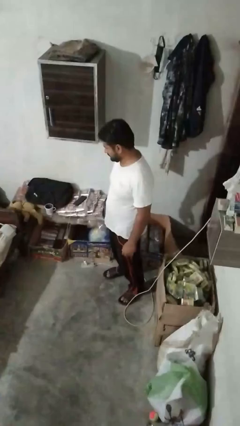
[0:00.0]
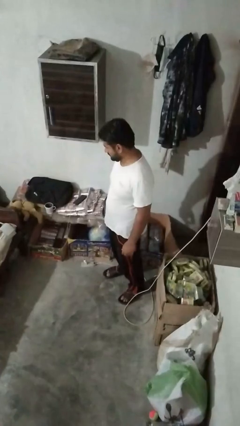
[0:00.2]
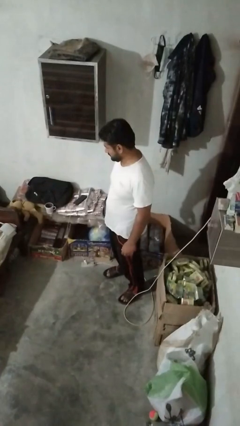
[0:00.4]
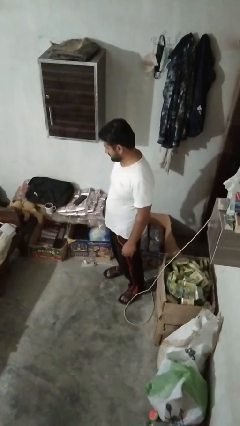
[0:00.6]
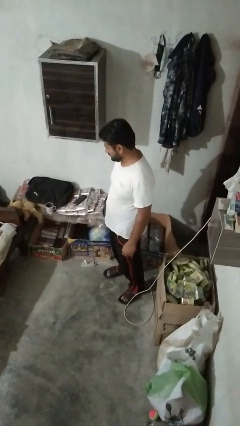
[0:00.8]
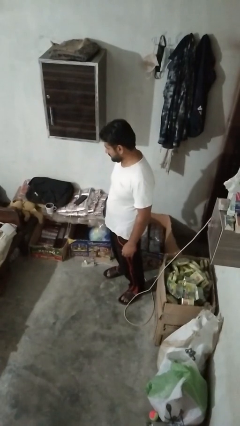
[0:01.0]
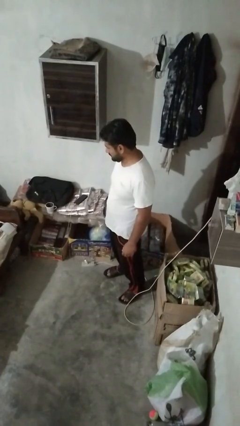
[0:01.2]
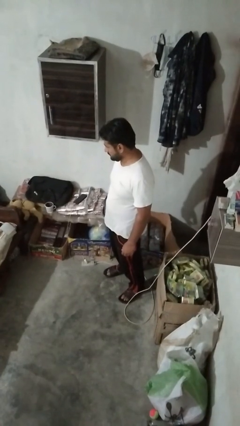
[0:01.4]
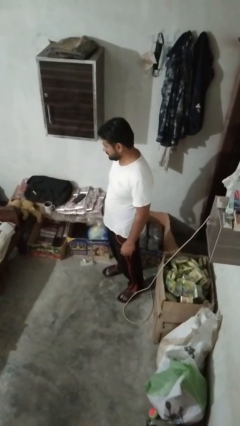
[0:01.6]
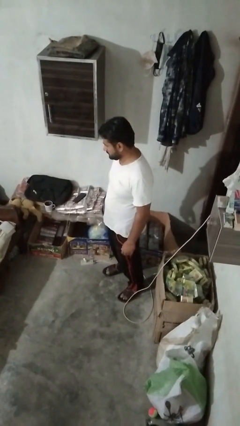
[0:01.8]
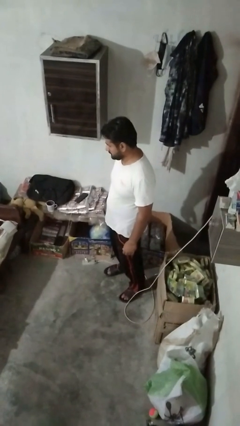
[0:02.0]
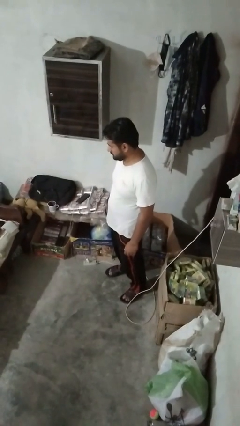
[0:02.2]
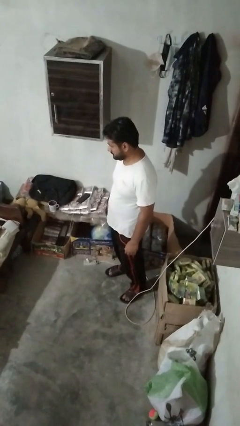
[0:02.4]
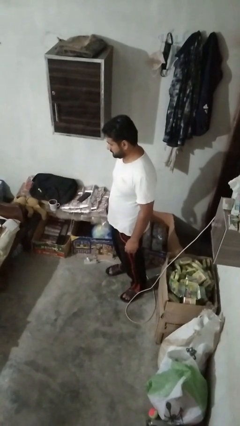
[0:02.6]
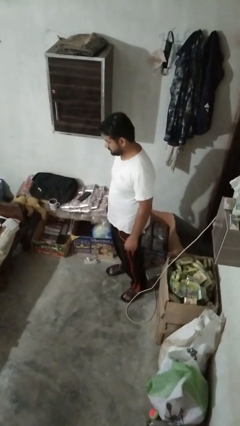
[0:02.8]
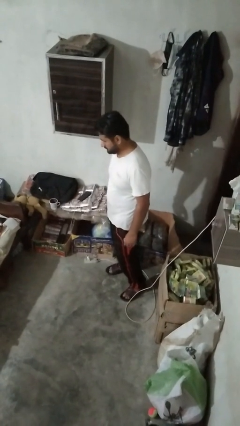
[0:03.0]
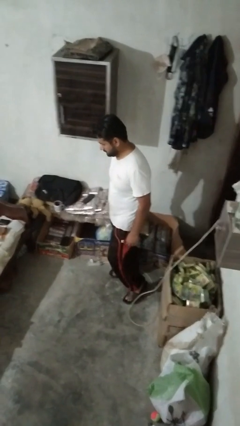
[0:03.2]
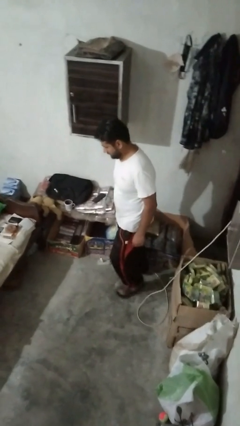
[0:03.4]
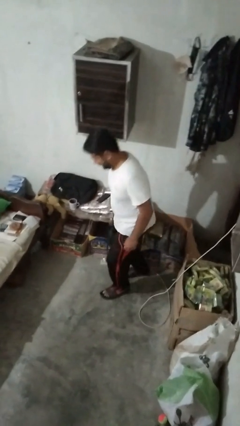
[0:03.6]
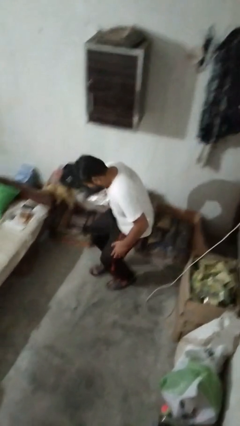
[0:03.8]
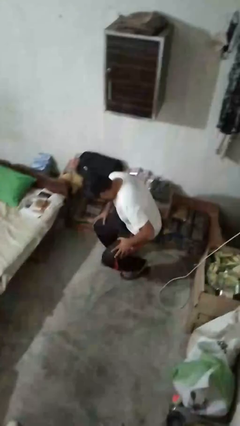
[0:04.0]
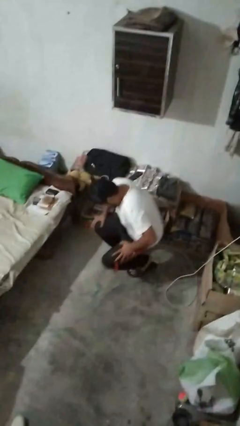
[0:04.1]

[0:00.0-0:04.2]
person trips on object on floor

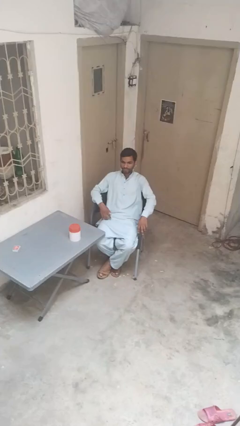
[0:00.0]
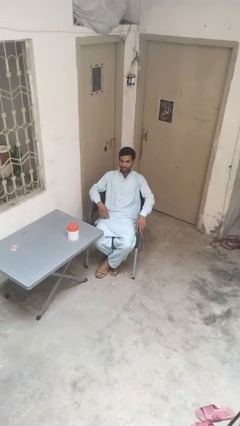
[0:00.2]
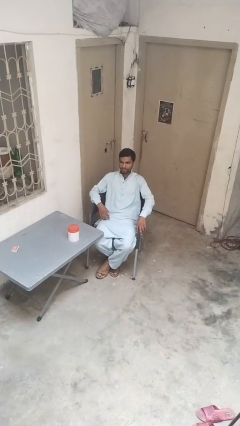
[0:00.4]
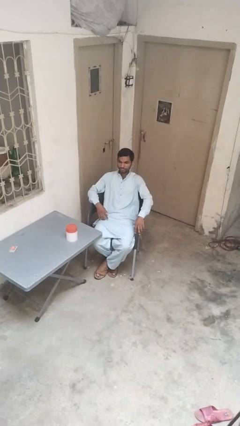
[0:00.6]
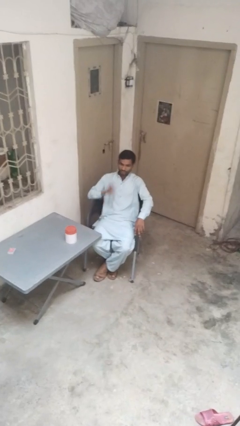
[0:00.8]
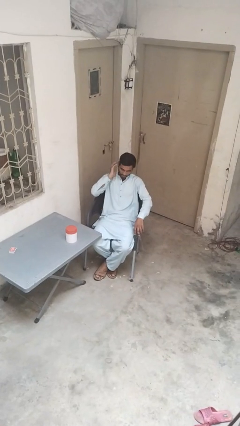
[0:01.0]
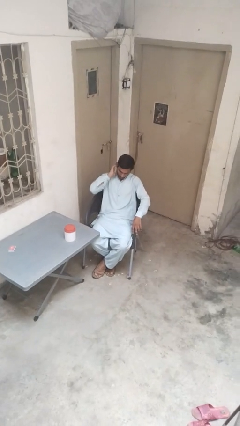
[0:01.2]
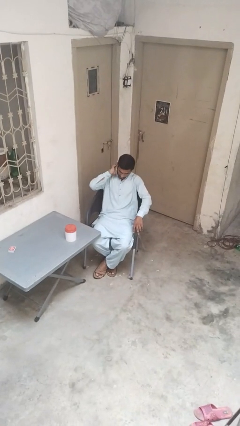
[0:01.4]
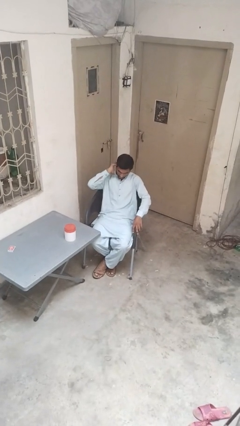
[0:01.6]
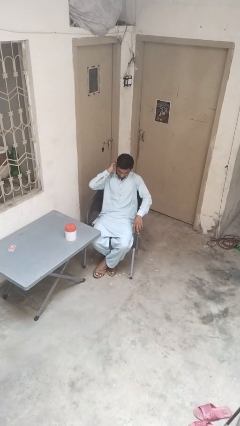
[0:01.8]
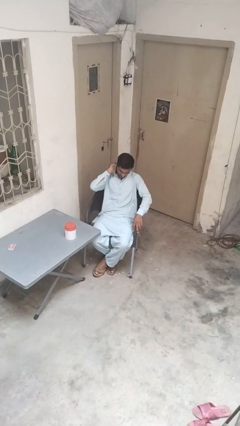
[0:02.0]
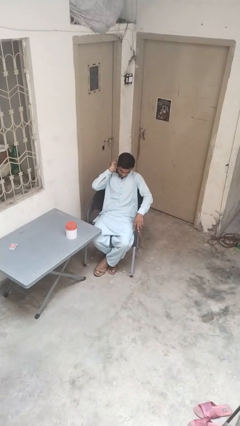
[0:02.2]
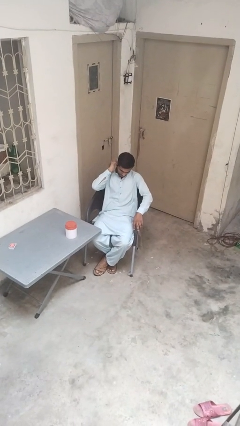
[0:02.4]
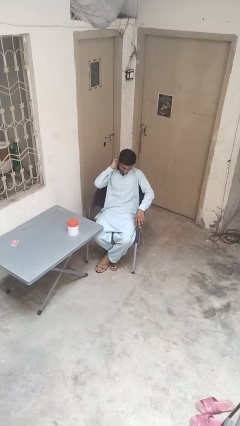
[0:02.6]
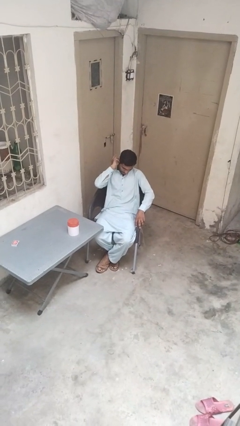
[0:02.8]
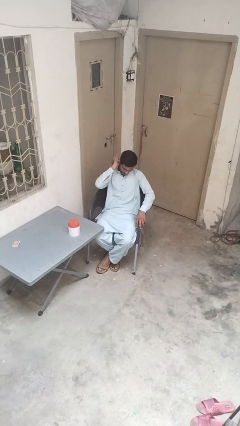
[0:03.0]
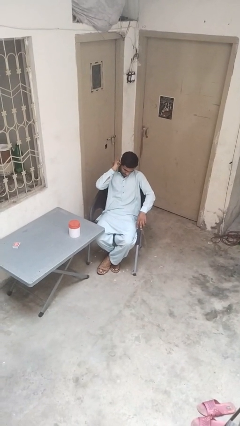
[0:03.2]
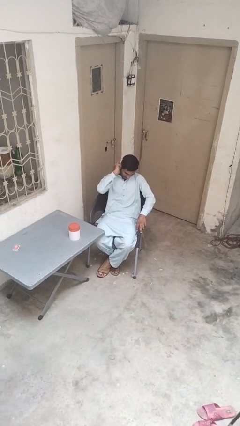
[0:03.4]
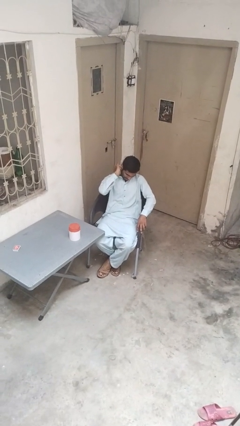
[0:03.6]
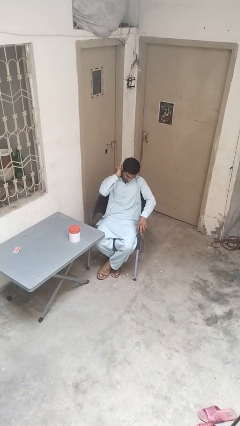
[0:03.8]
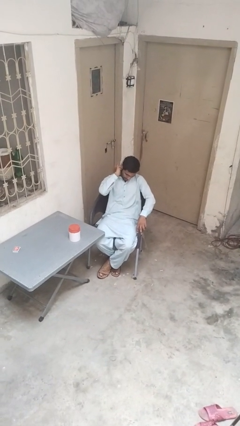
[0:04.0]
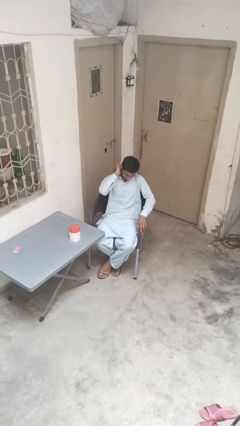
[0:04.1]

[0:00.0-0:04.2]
person puts fingers in ear

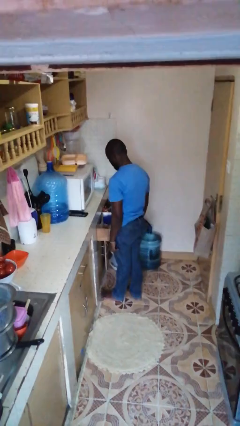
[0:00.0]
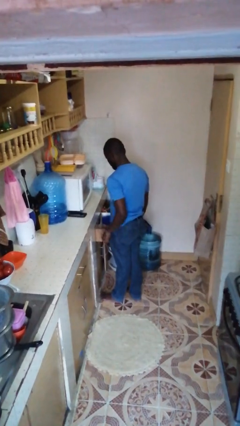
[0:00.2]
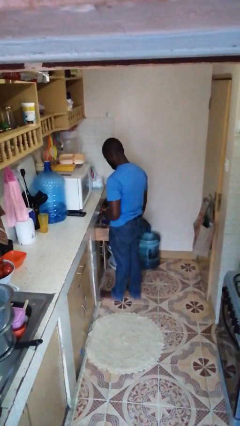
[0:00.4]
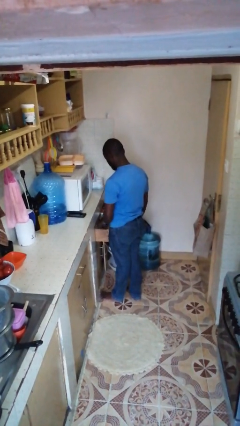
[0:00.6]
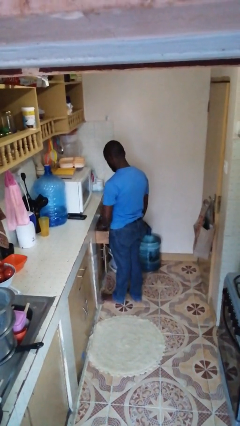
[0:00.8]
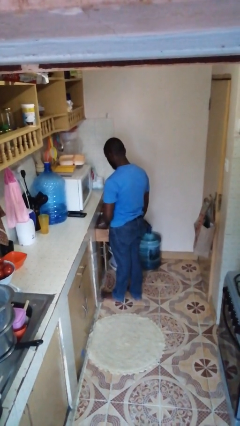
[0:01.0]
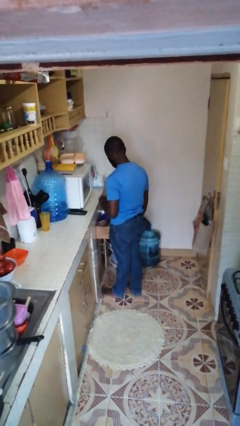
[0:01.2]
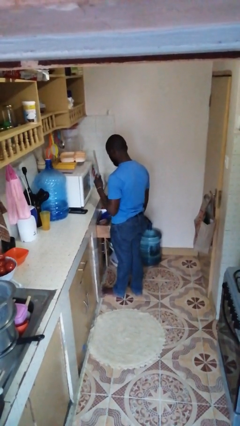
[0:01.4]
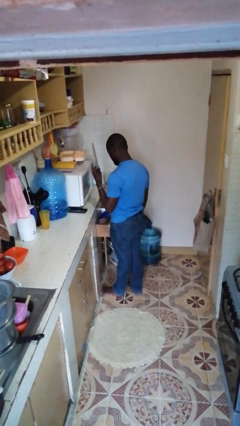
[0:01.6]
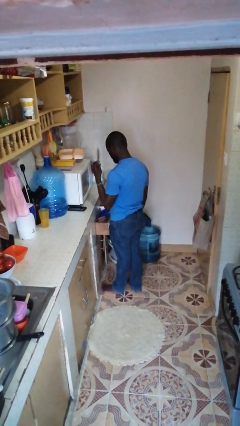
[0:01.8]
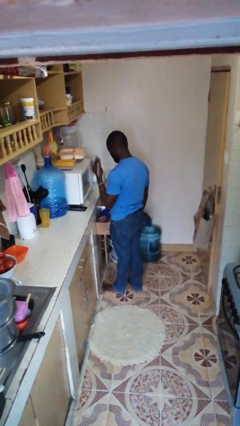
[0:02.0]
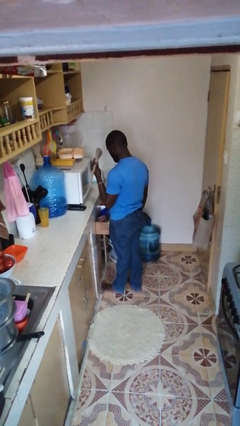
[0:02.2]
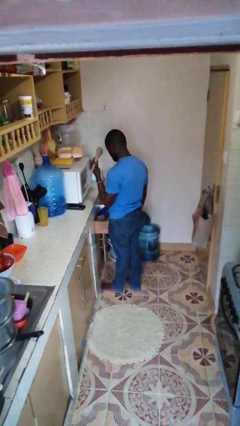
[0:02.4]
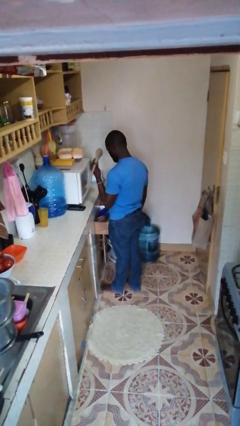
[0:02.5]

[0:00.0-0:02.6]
person takes object from kitchen drawer

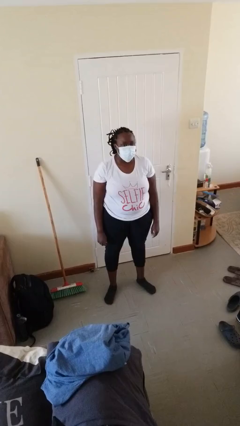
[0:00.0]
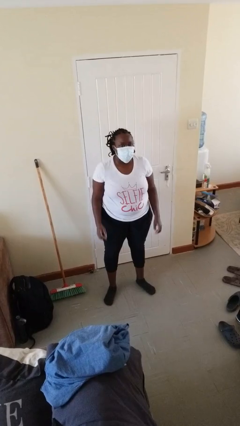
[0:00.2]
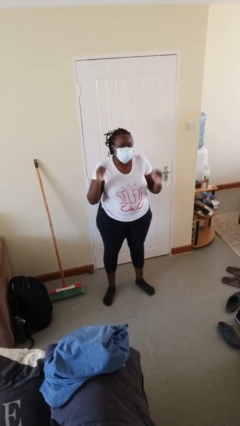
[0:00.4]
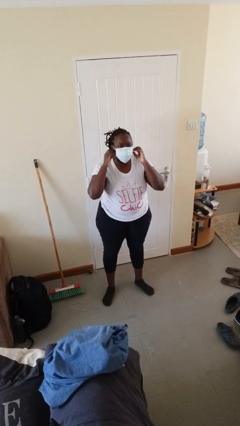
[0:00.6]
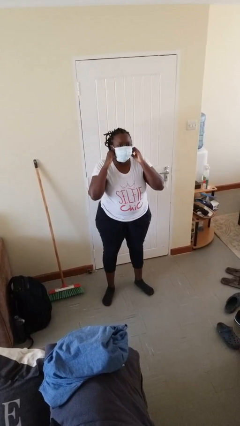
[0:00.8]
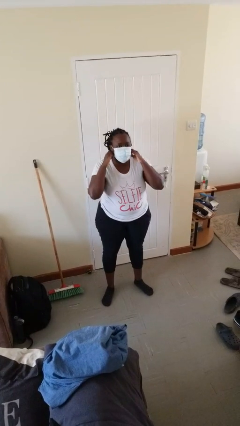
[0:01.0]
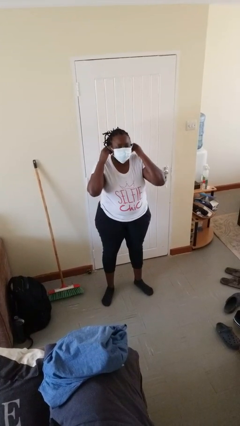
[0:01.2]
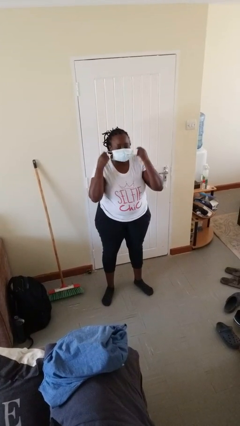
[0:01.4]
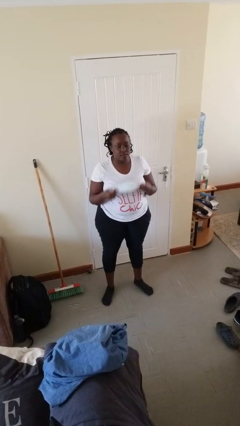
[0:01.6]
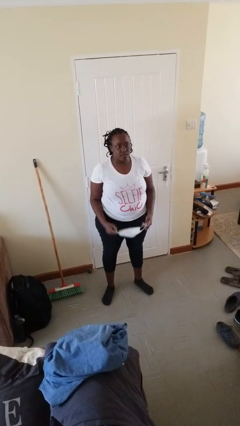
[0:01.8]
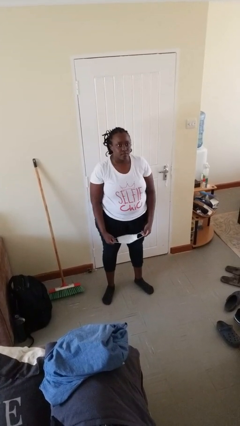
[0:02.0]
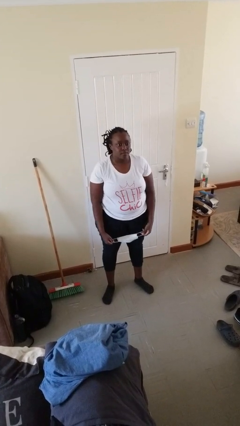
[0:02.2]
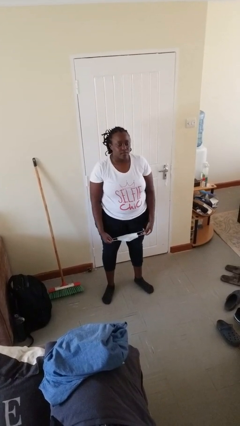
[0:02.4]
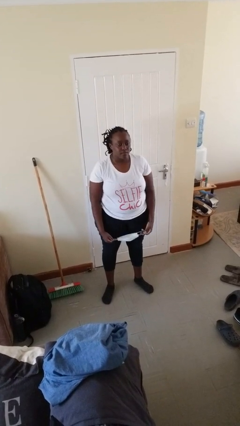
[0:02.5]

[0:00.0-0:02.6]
person takes off facemask

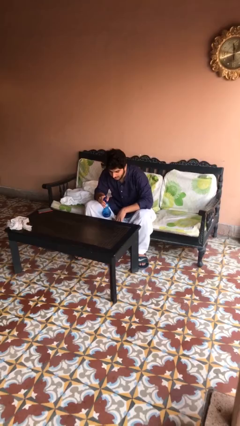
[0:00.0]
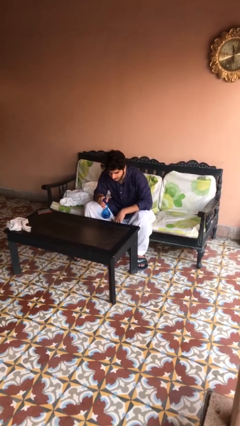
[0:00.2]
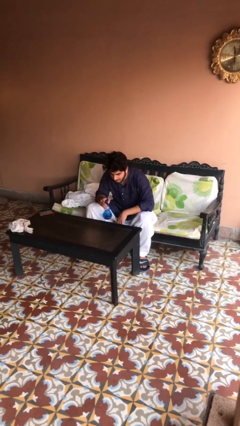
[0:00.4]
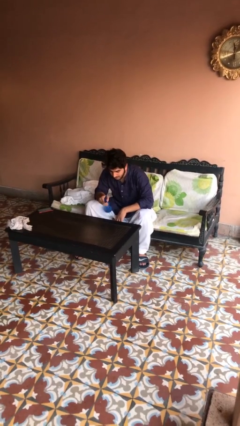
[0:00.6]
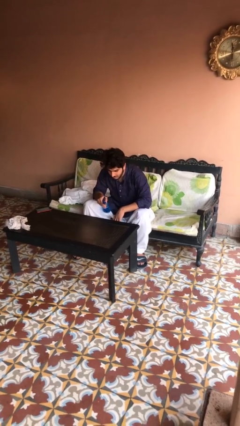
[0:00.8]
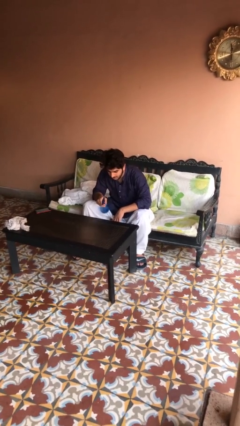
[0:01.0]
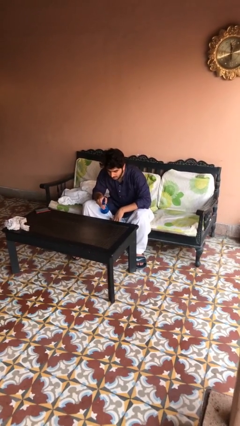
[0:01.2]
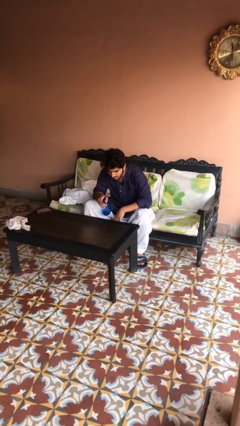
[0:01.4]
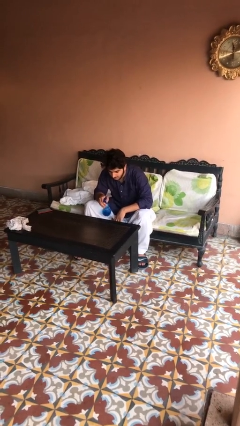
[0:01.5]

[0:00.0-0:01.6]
person sprays from bottle

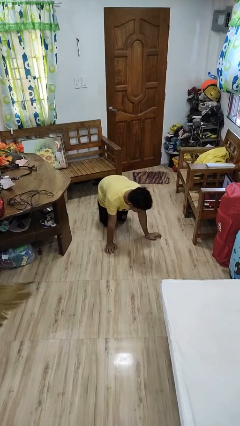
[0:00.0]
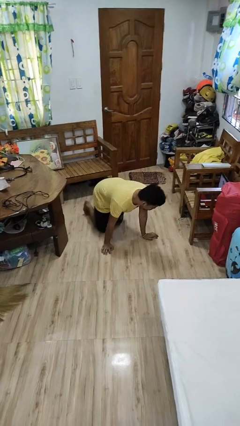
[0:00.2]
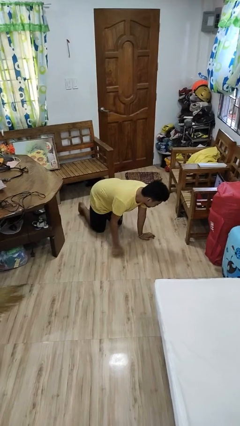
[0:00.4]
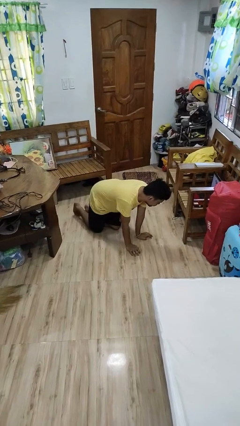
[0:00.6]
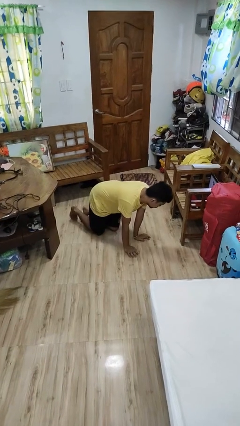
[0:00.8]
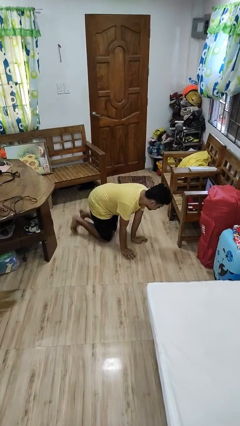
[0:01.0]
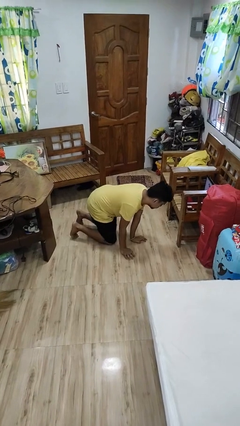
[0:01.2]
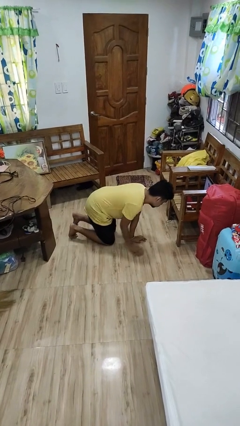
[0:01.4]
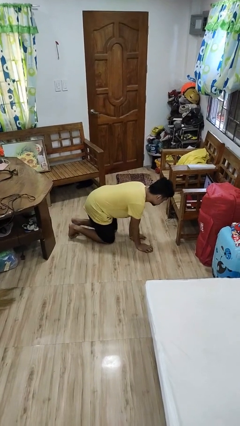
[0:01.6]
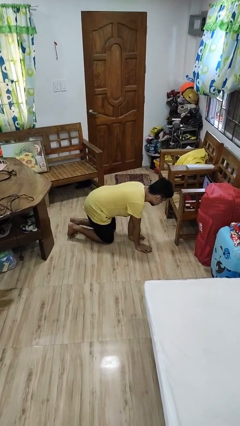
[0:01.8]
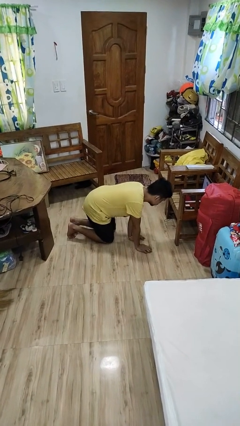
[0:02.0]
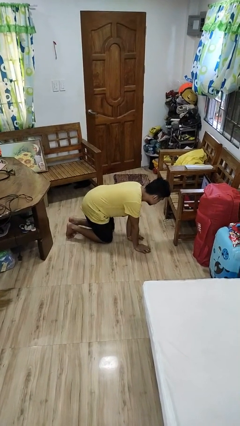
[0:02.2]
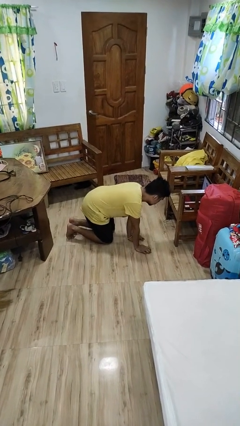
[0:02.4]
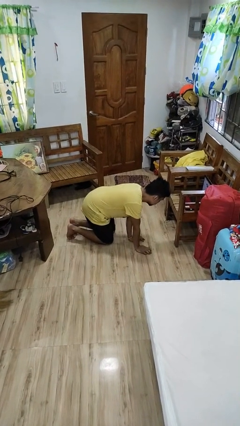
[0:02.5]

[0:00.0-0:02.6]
person crawls
